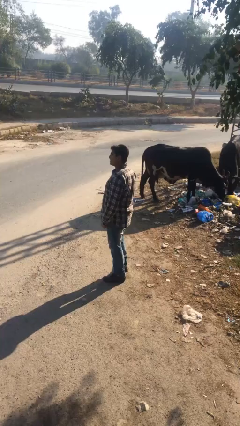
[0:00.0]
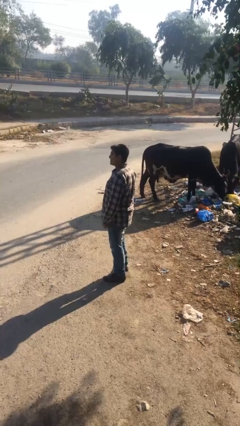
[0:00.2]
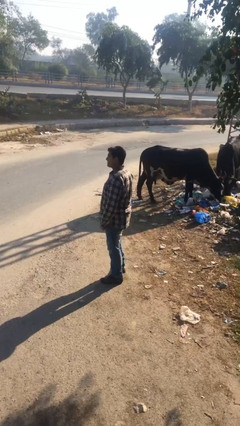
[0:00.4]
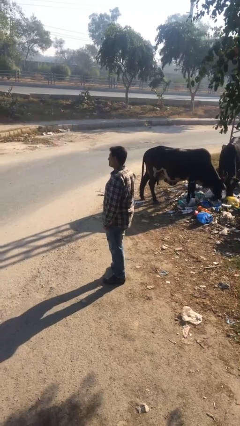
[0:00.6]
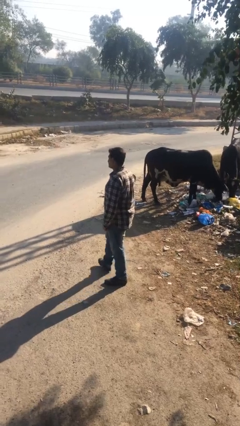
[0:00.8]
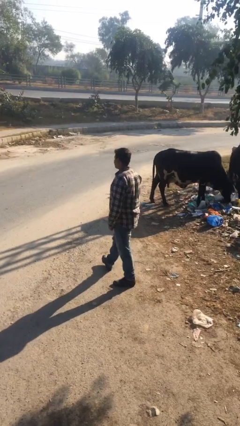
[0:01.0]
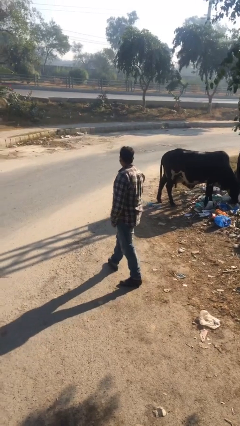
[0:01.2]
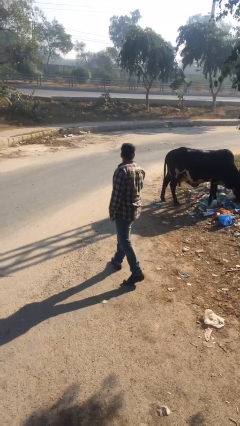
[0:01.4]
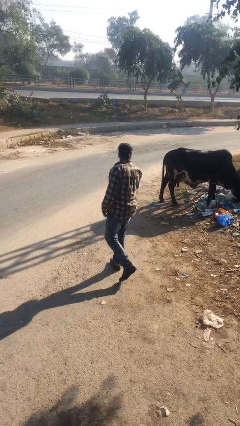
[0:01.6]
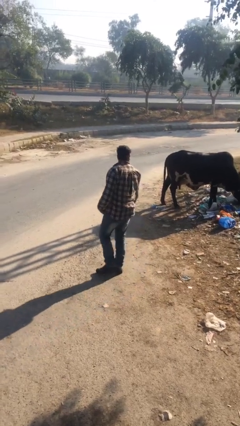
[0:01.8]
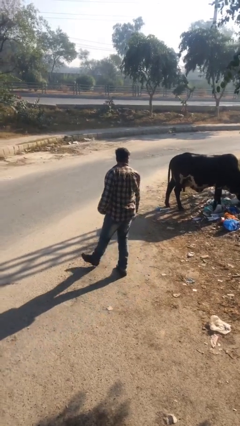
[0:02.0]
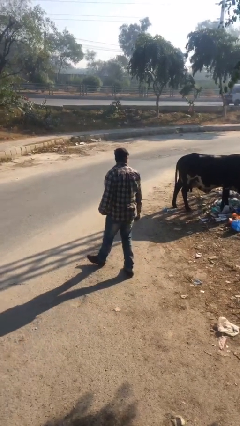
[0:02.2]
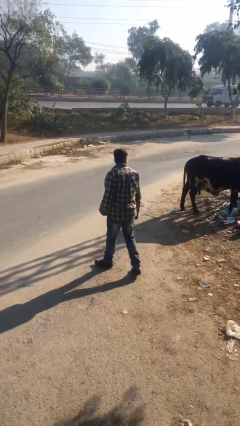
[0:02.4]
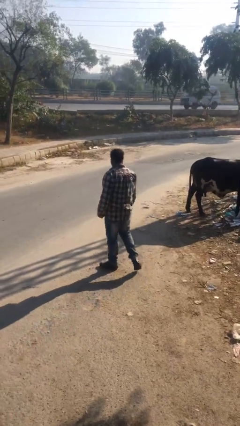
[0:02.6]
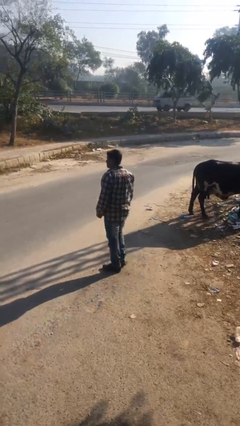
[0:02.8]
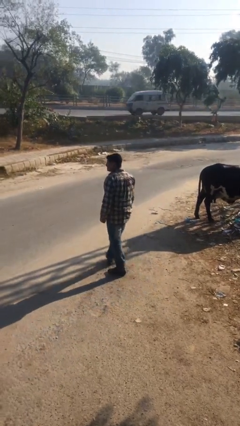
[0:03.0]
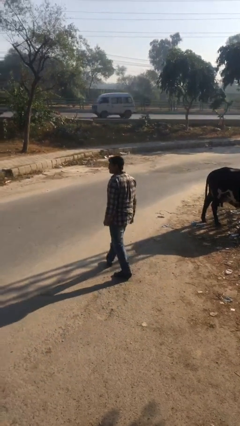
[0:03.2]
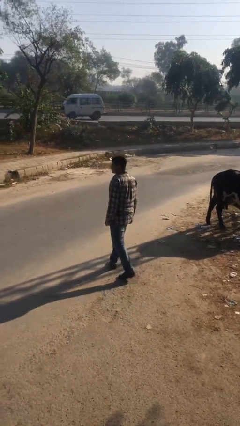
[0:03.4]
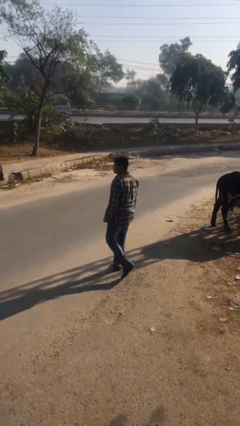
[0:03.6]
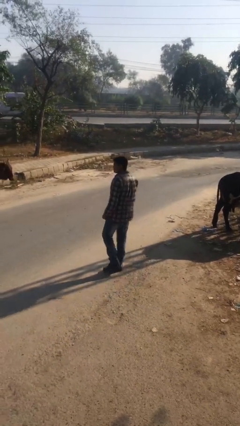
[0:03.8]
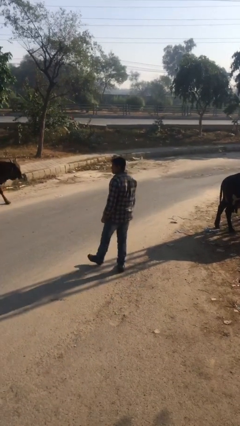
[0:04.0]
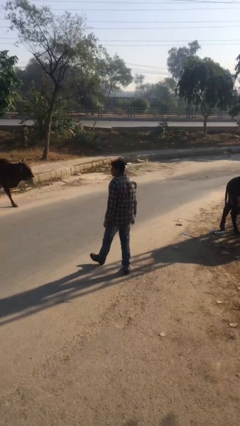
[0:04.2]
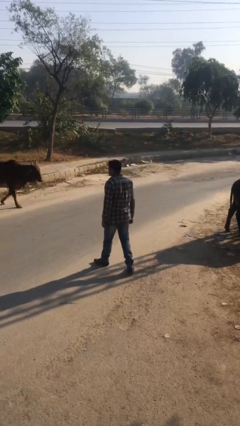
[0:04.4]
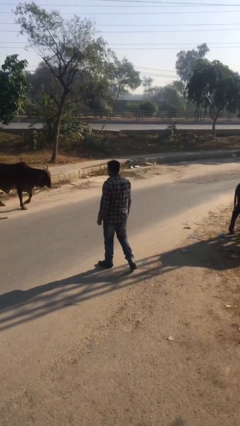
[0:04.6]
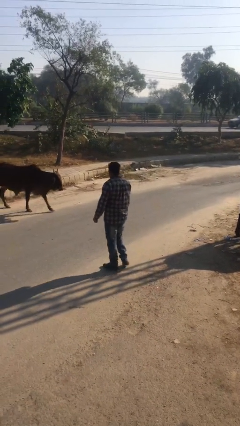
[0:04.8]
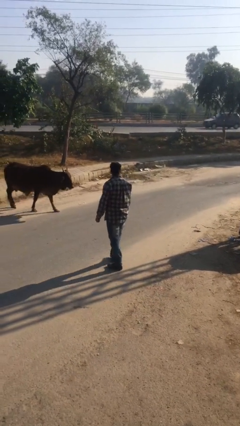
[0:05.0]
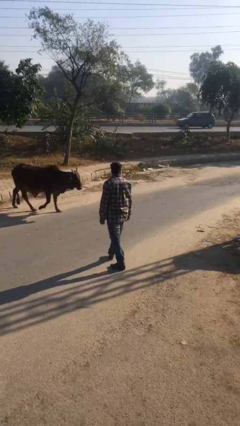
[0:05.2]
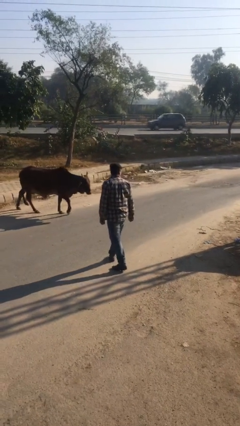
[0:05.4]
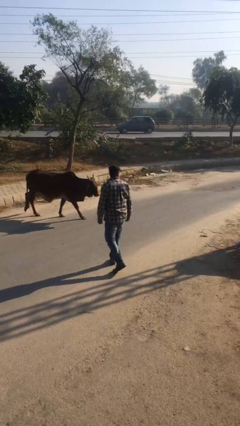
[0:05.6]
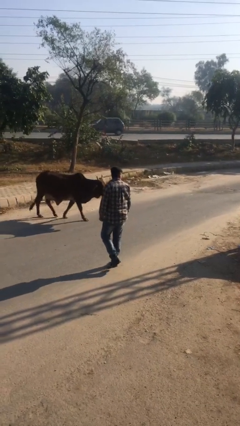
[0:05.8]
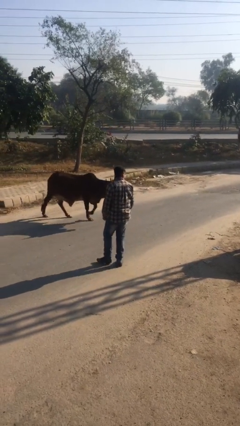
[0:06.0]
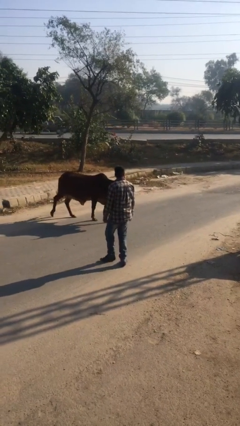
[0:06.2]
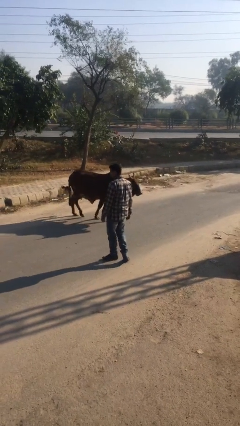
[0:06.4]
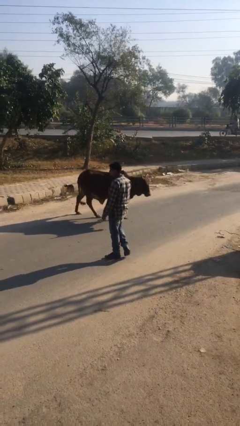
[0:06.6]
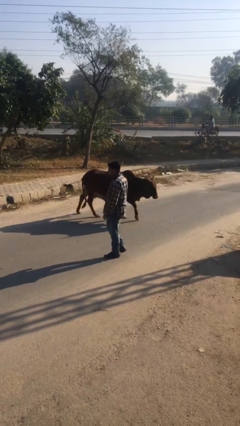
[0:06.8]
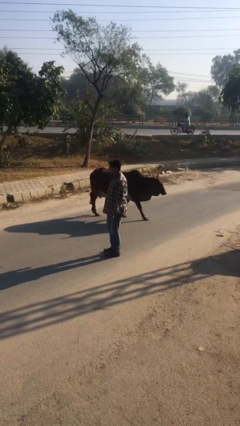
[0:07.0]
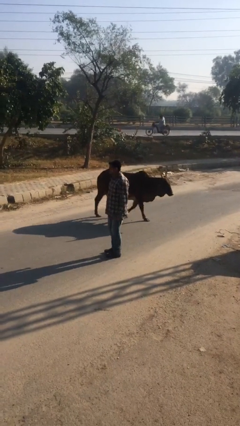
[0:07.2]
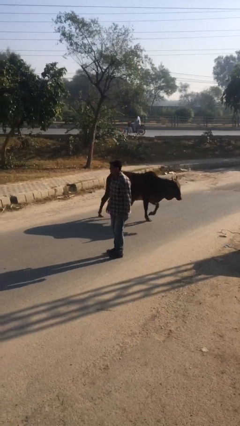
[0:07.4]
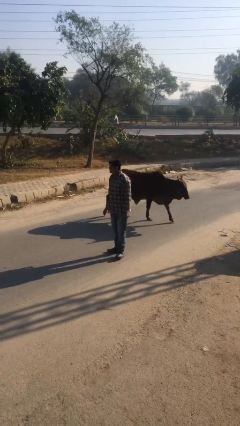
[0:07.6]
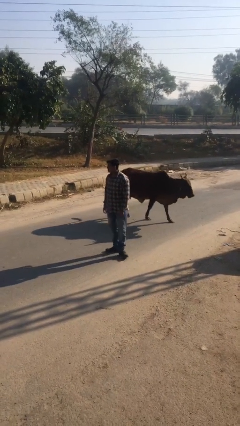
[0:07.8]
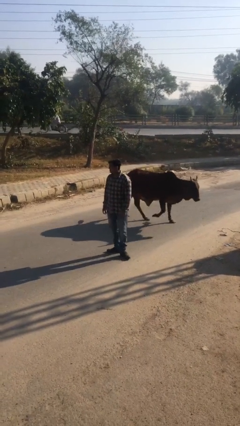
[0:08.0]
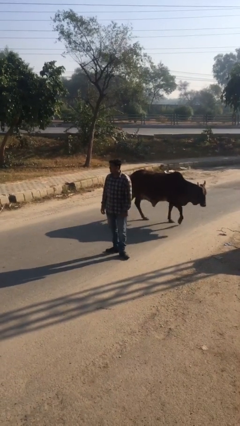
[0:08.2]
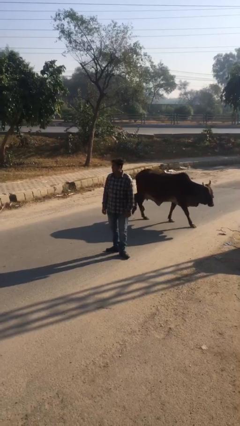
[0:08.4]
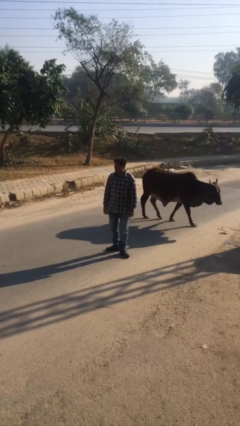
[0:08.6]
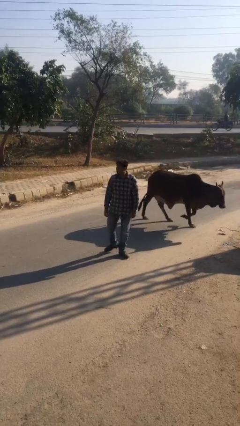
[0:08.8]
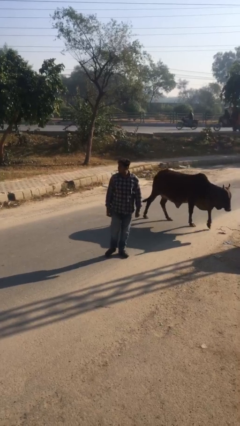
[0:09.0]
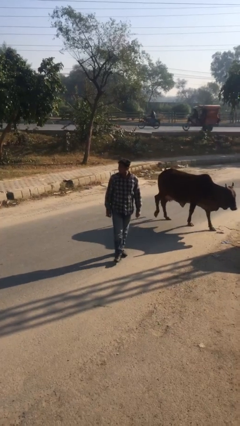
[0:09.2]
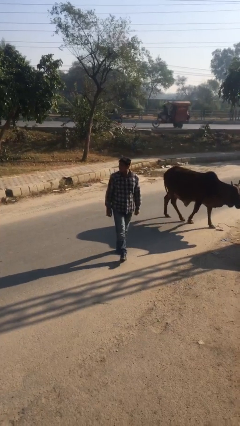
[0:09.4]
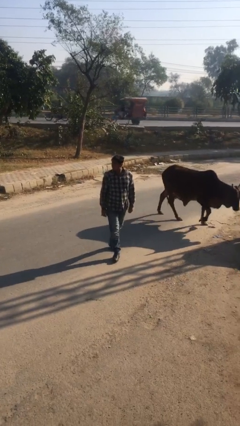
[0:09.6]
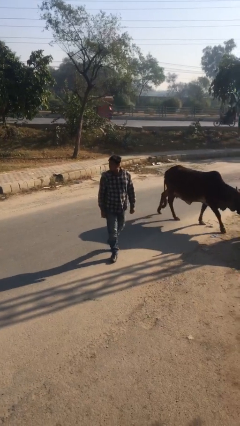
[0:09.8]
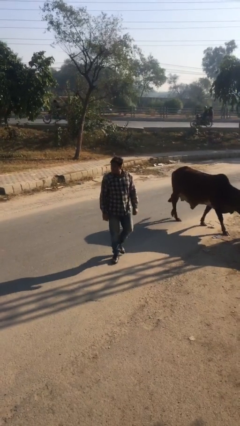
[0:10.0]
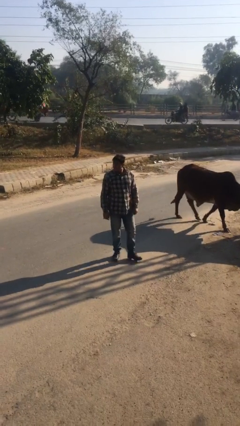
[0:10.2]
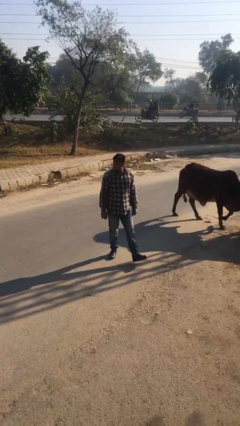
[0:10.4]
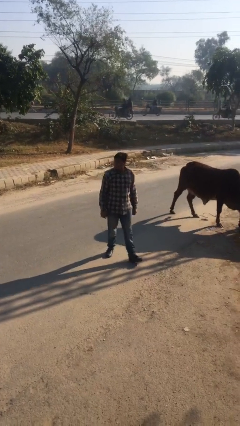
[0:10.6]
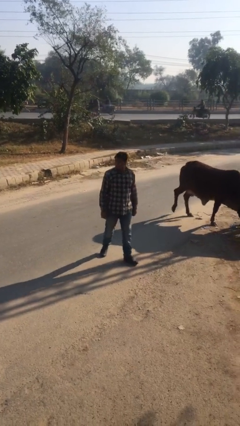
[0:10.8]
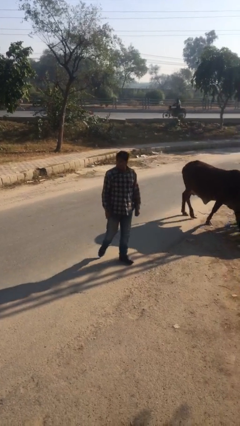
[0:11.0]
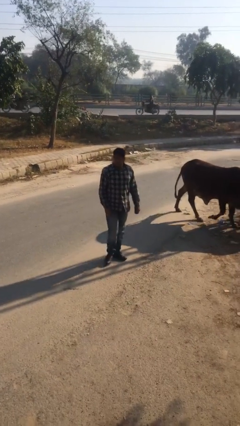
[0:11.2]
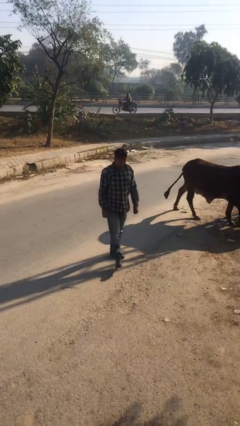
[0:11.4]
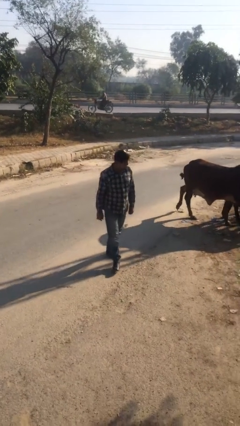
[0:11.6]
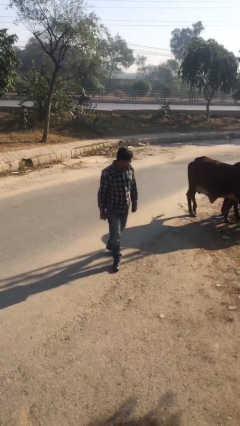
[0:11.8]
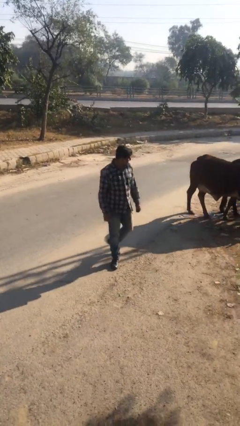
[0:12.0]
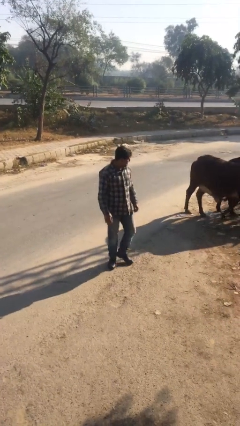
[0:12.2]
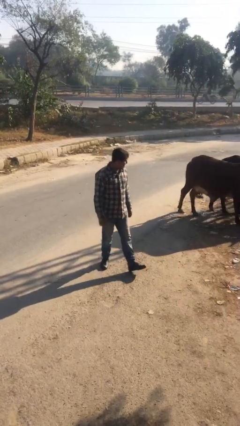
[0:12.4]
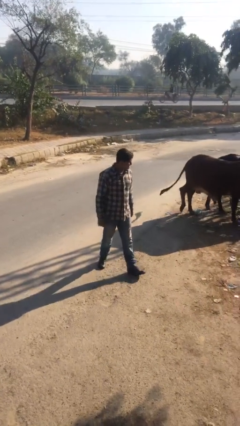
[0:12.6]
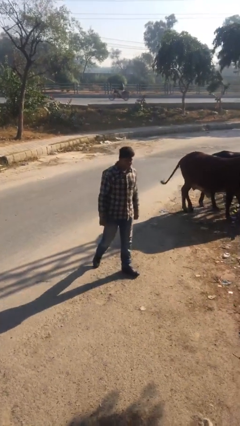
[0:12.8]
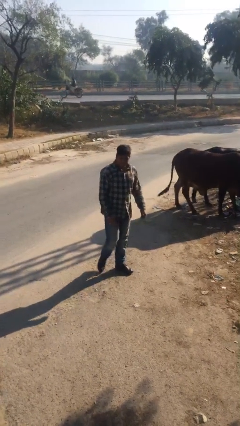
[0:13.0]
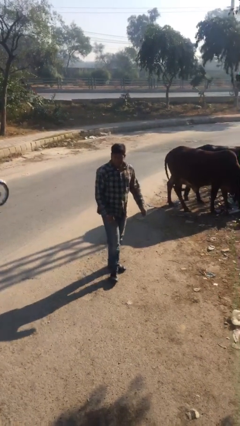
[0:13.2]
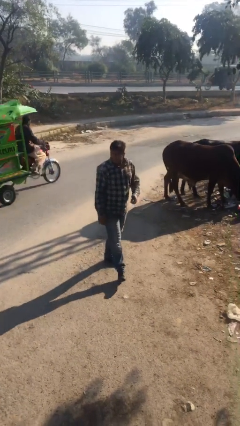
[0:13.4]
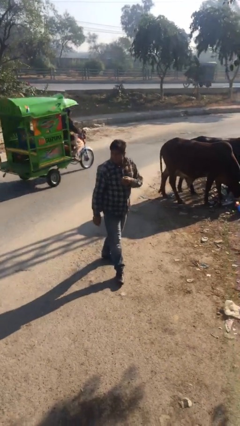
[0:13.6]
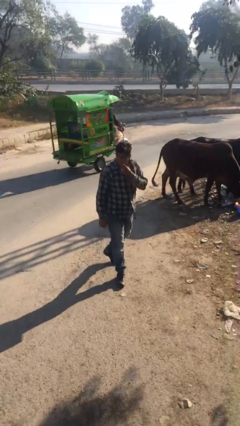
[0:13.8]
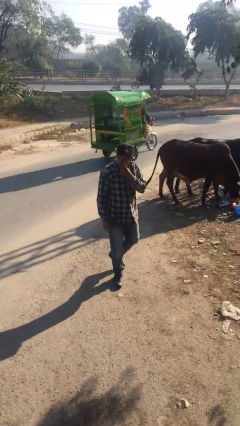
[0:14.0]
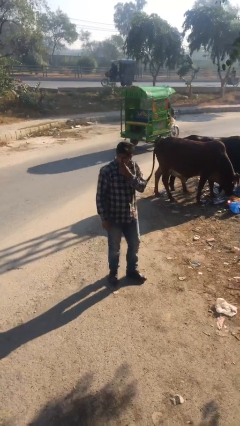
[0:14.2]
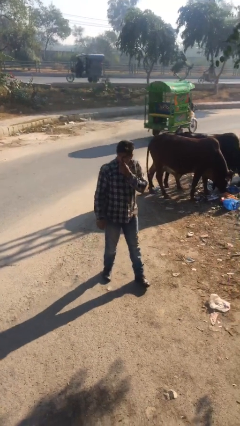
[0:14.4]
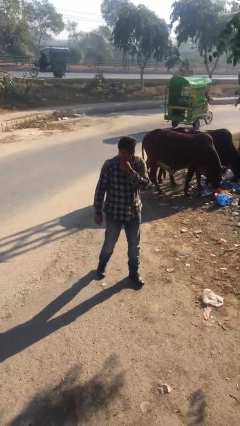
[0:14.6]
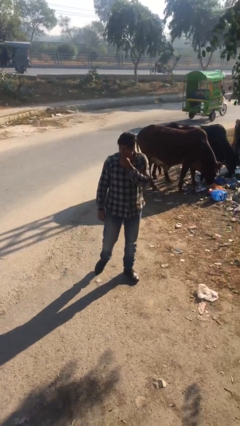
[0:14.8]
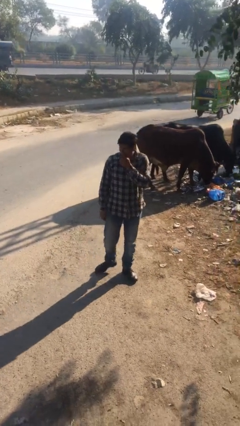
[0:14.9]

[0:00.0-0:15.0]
person walks

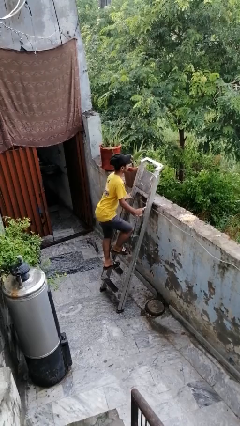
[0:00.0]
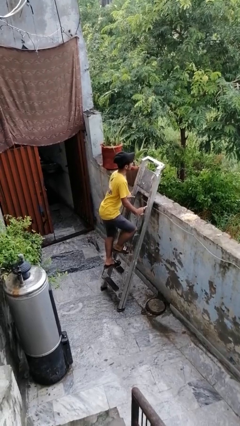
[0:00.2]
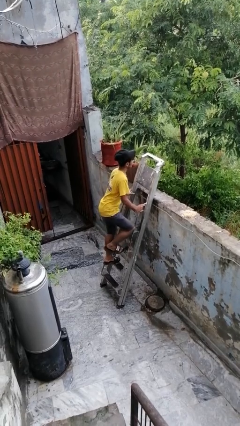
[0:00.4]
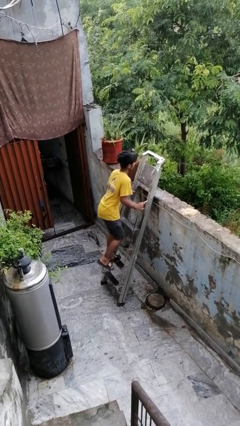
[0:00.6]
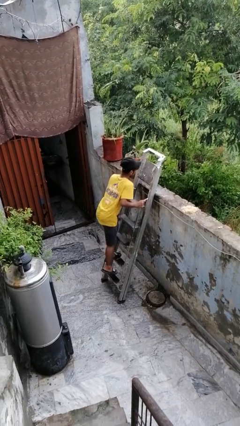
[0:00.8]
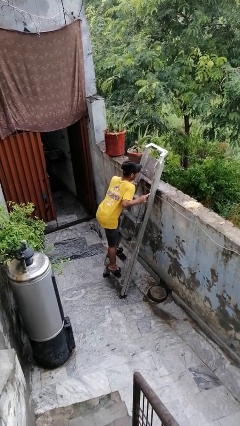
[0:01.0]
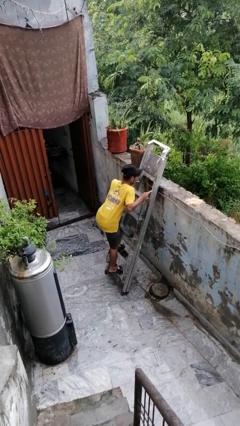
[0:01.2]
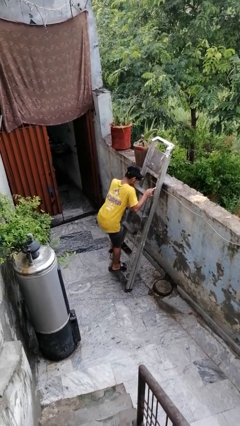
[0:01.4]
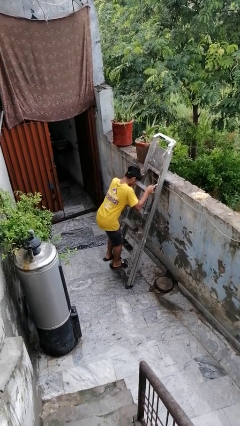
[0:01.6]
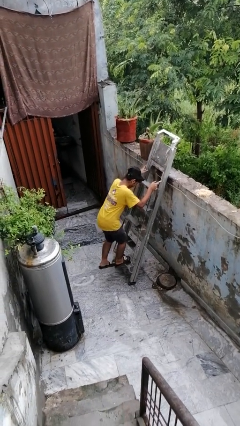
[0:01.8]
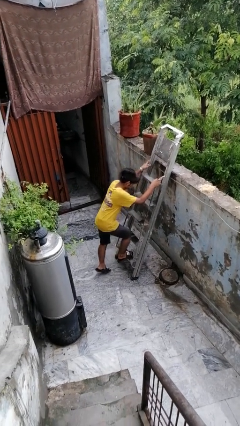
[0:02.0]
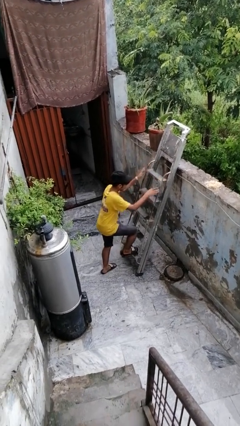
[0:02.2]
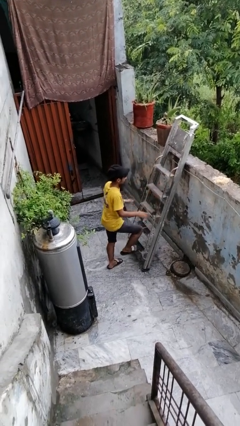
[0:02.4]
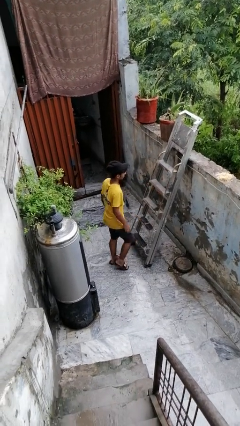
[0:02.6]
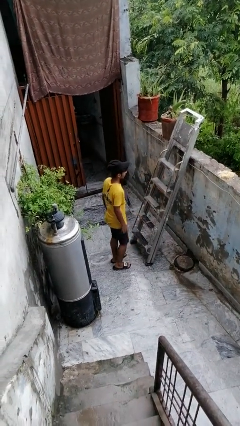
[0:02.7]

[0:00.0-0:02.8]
person climbs down ladder

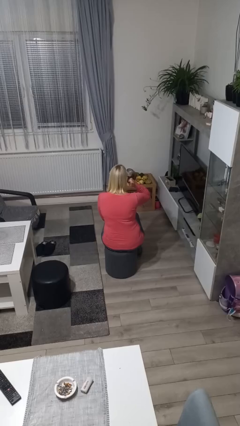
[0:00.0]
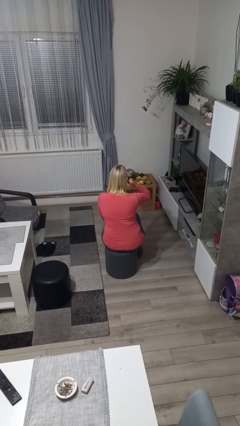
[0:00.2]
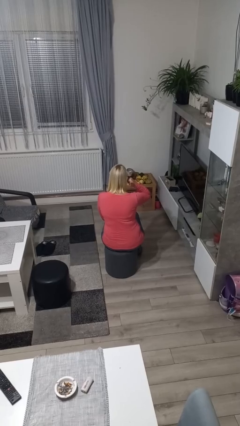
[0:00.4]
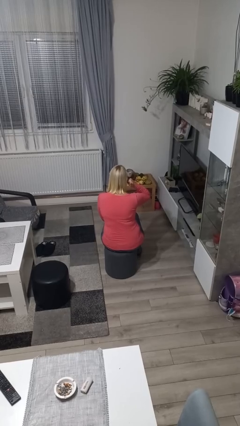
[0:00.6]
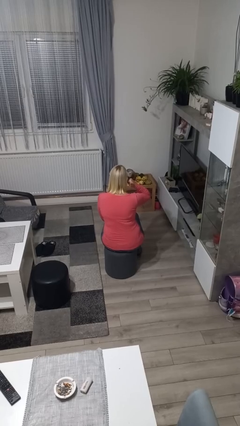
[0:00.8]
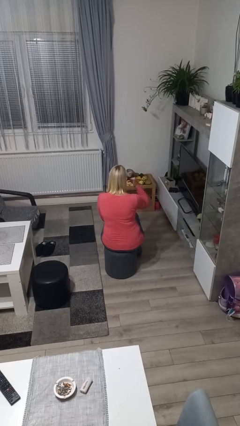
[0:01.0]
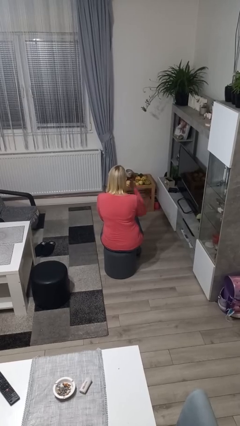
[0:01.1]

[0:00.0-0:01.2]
person gestures call me
